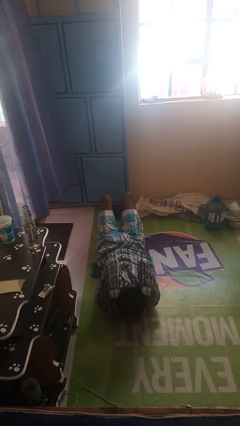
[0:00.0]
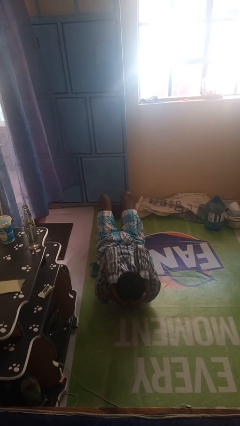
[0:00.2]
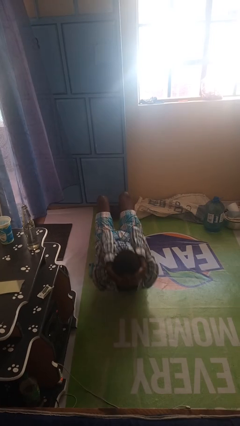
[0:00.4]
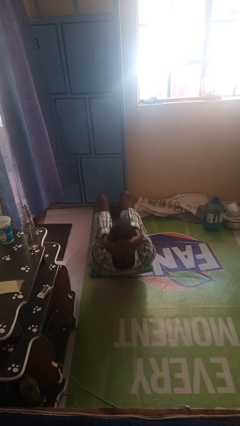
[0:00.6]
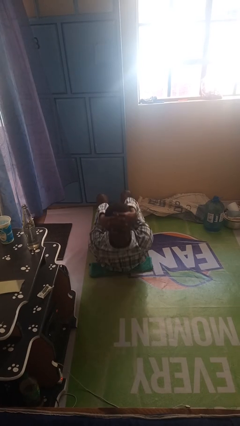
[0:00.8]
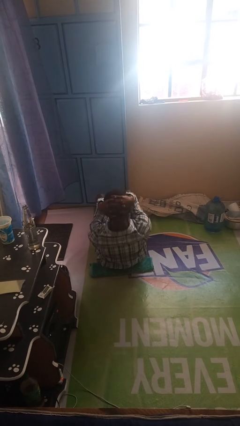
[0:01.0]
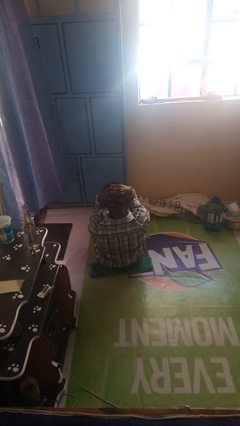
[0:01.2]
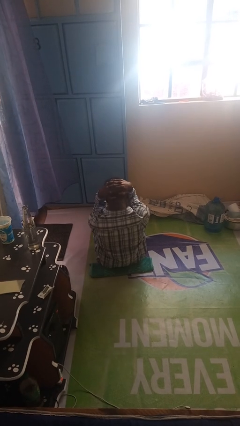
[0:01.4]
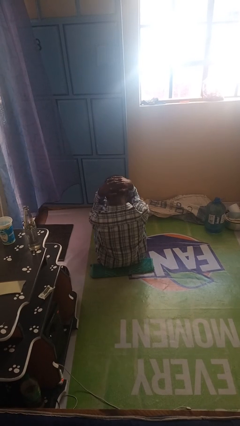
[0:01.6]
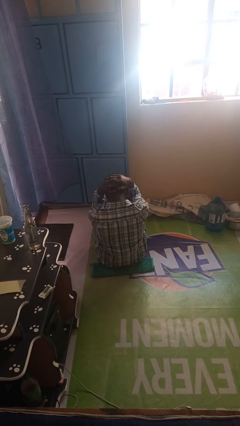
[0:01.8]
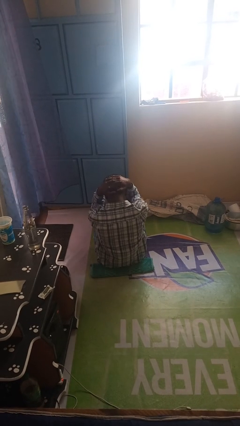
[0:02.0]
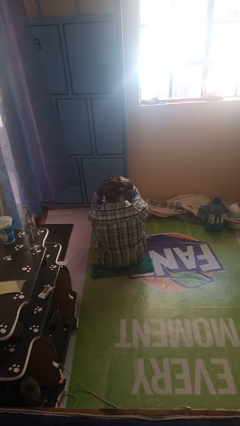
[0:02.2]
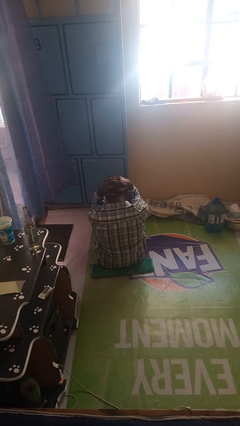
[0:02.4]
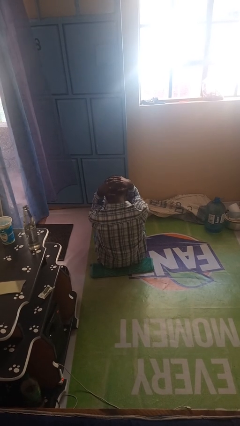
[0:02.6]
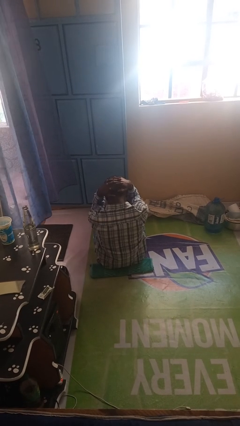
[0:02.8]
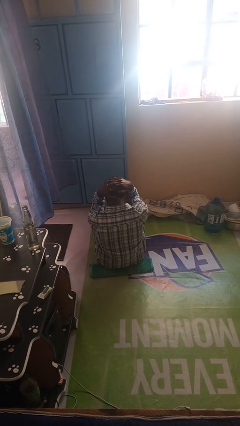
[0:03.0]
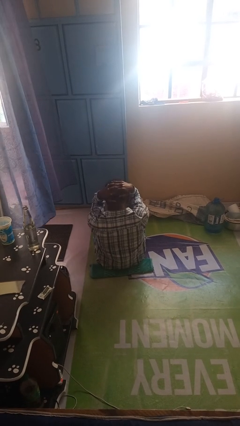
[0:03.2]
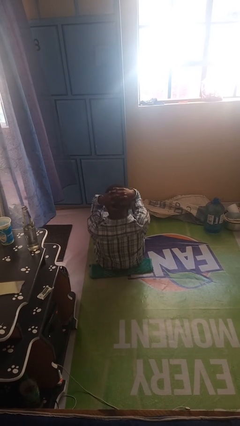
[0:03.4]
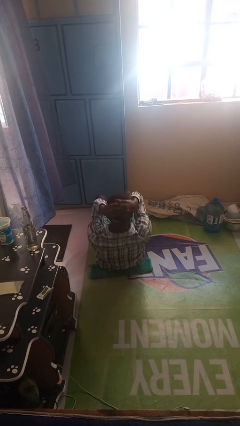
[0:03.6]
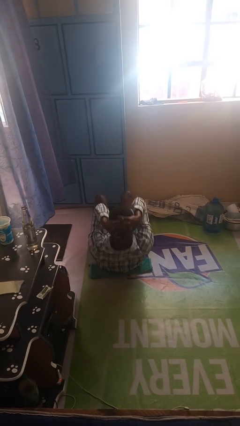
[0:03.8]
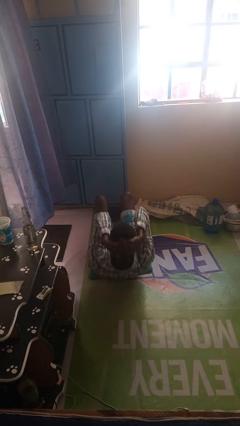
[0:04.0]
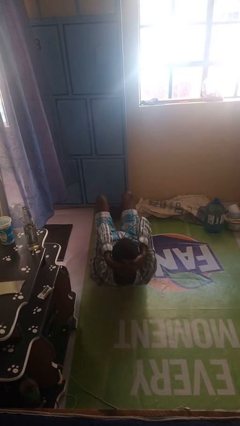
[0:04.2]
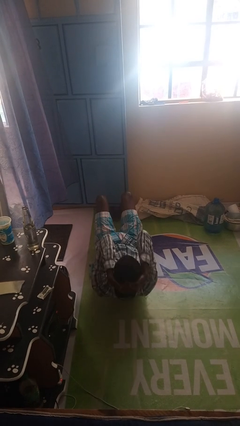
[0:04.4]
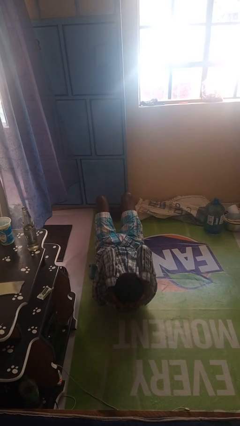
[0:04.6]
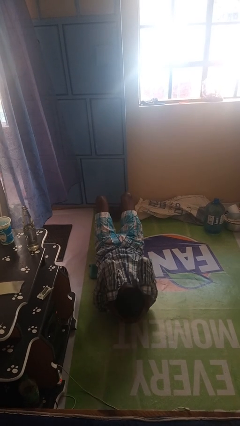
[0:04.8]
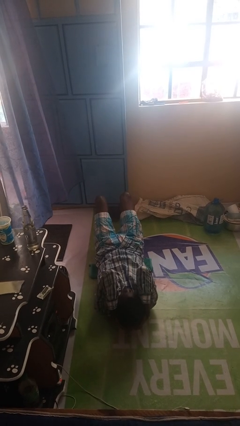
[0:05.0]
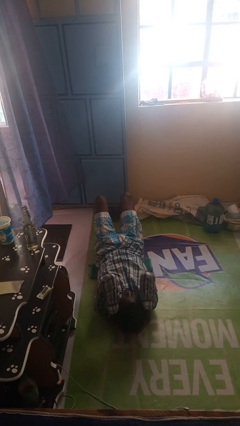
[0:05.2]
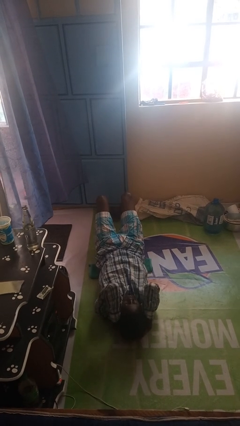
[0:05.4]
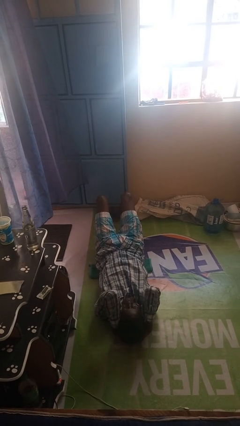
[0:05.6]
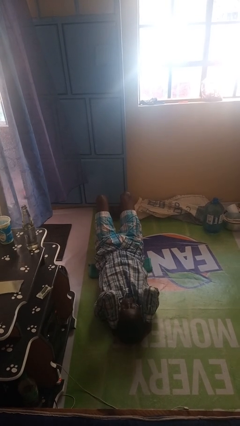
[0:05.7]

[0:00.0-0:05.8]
person exercises with situp

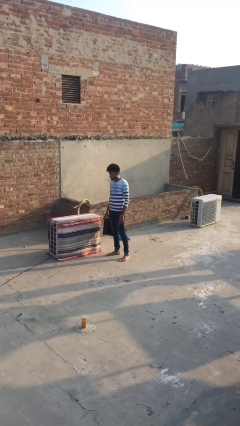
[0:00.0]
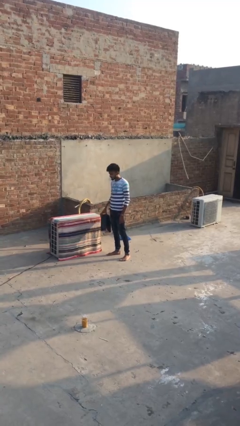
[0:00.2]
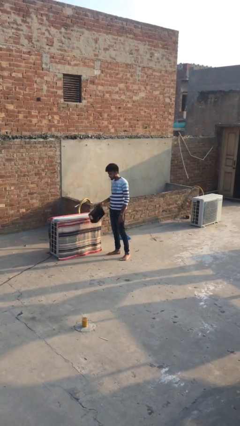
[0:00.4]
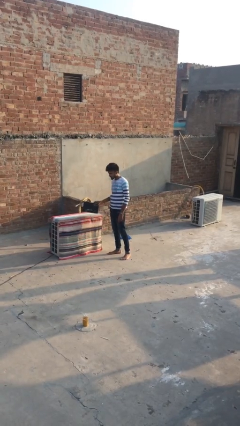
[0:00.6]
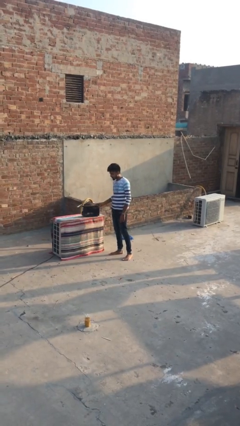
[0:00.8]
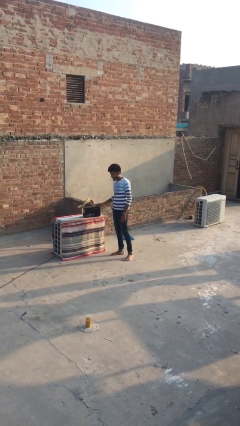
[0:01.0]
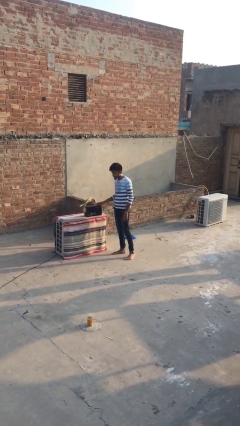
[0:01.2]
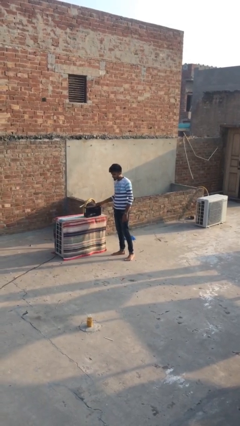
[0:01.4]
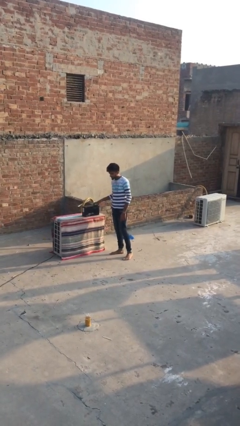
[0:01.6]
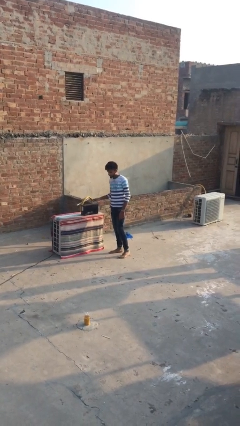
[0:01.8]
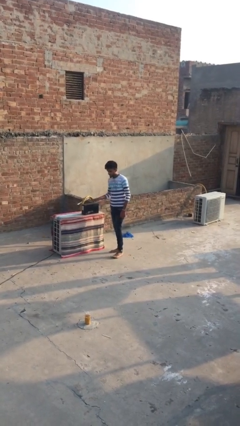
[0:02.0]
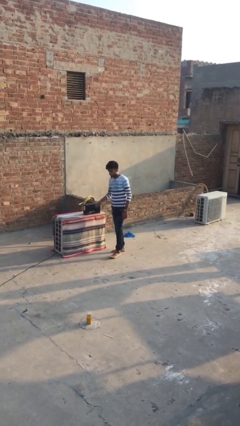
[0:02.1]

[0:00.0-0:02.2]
person puts down object on table

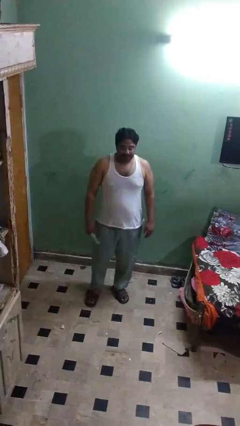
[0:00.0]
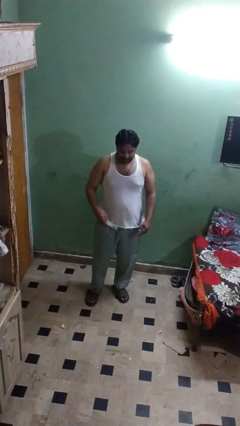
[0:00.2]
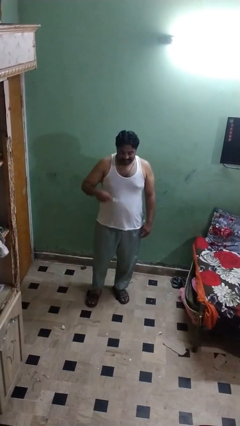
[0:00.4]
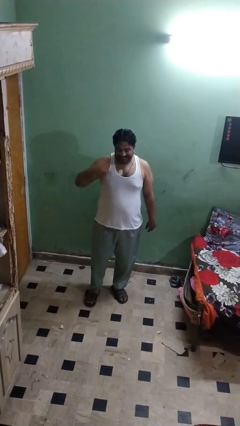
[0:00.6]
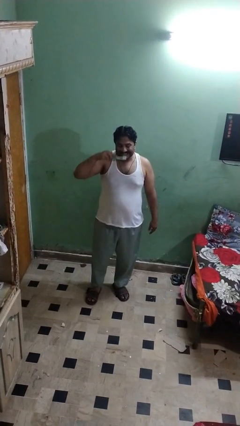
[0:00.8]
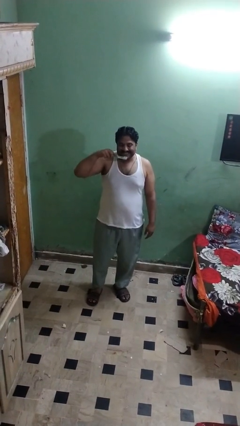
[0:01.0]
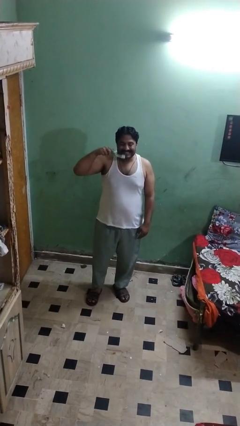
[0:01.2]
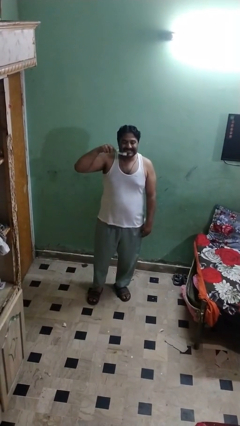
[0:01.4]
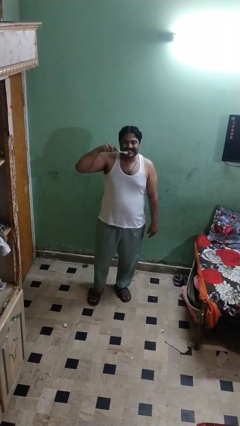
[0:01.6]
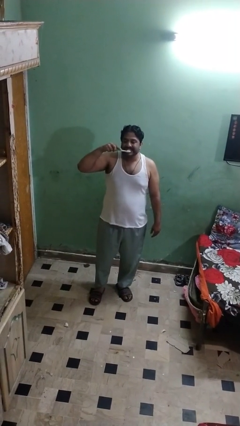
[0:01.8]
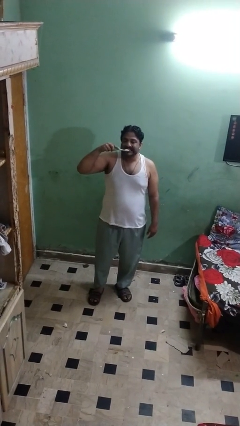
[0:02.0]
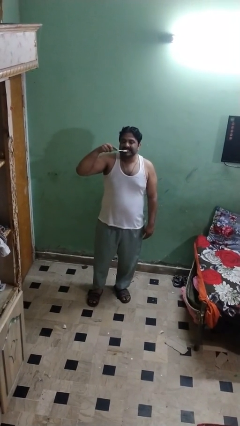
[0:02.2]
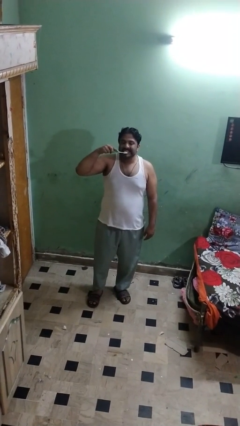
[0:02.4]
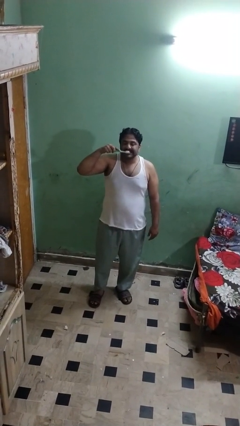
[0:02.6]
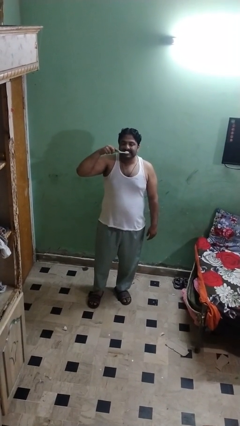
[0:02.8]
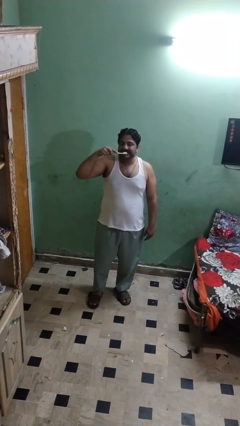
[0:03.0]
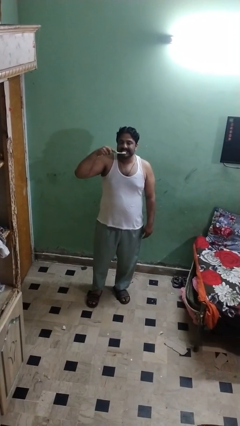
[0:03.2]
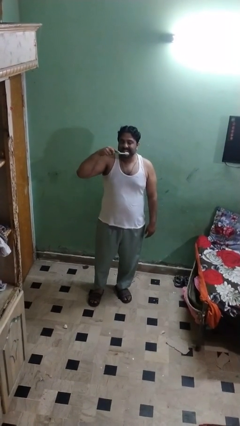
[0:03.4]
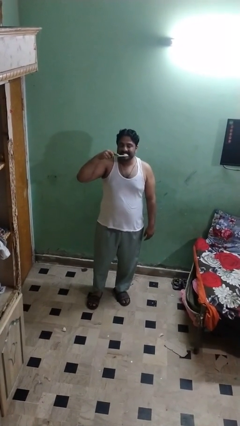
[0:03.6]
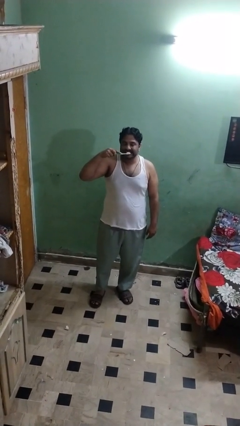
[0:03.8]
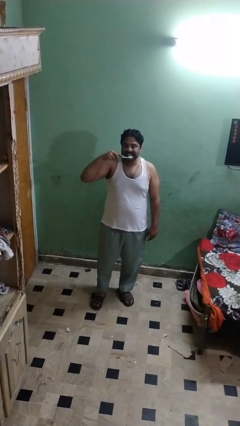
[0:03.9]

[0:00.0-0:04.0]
person brushes teeth

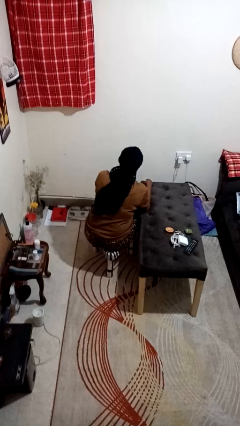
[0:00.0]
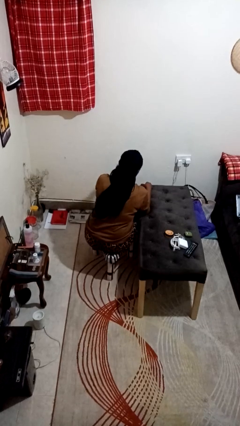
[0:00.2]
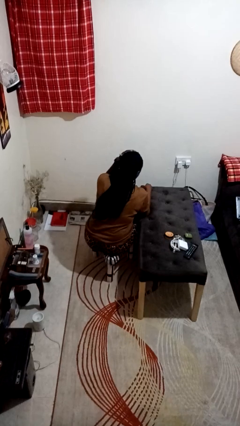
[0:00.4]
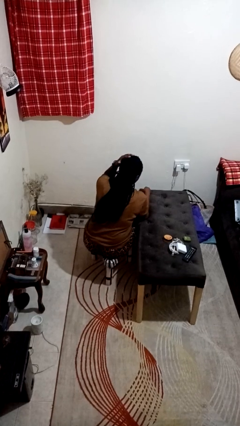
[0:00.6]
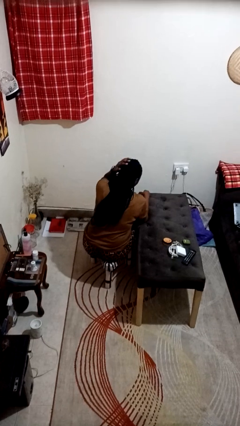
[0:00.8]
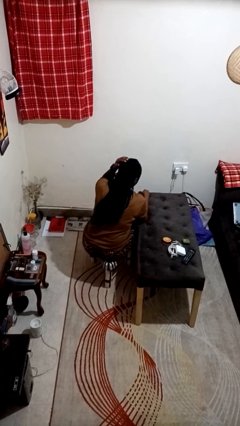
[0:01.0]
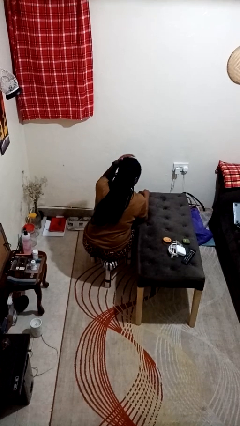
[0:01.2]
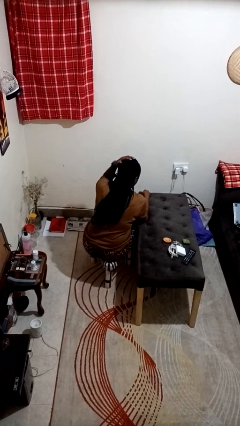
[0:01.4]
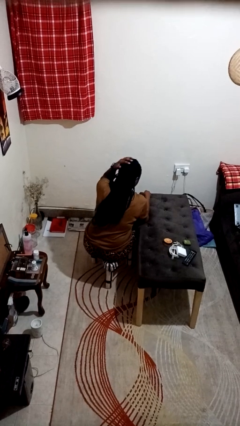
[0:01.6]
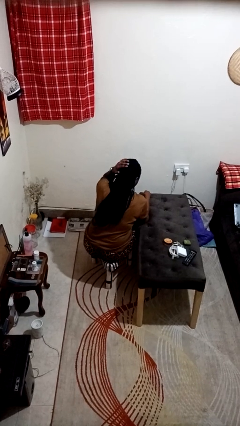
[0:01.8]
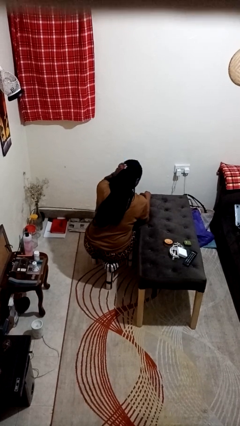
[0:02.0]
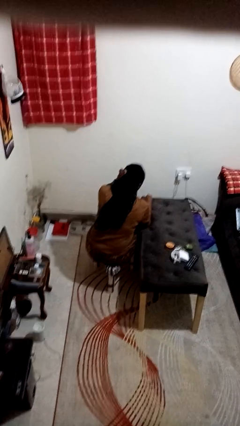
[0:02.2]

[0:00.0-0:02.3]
person strokes hair

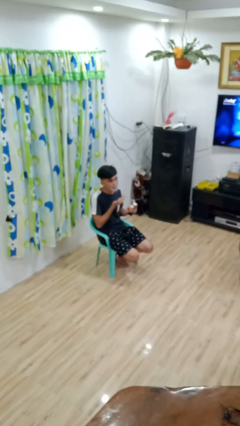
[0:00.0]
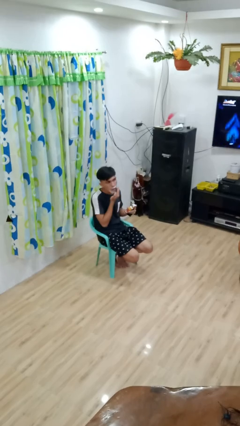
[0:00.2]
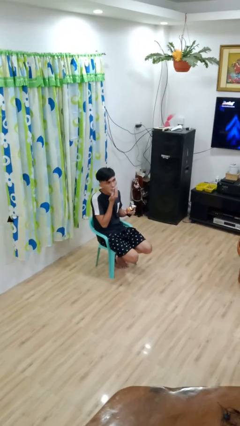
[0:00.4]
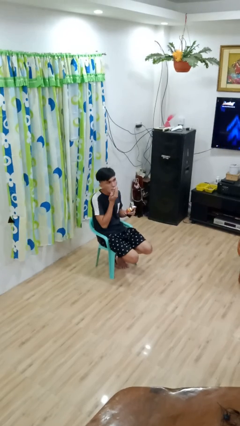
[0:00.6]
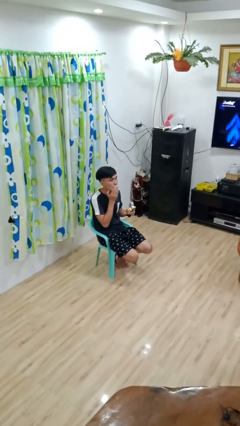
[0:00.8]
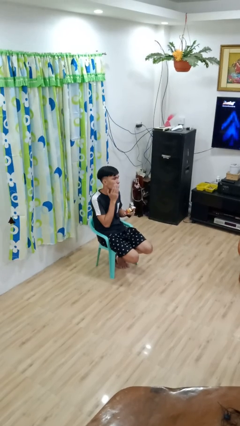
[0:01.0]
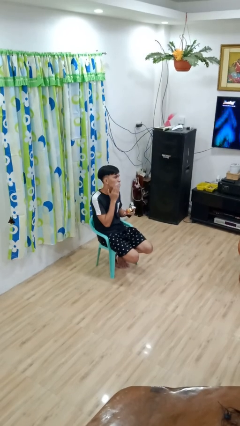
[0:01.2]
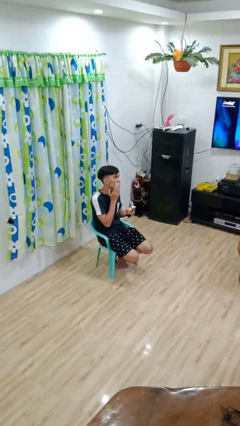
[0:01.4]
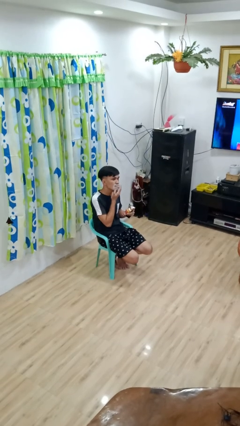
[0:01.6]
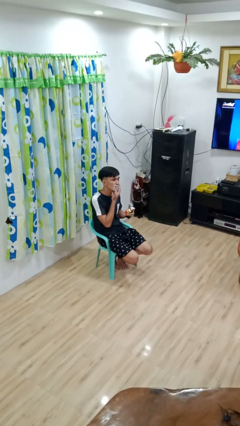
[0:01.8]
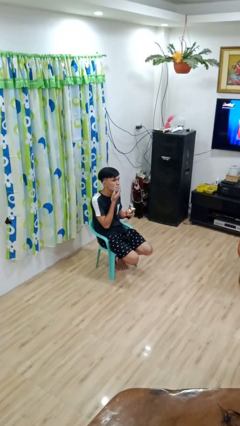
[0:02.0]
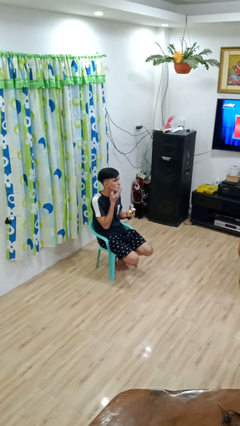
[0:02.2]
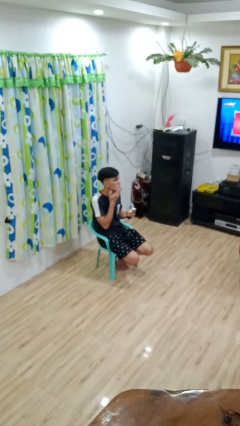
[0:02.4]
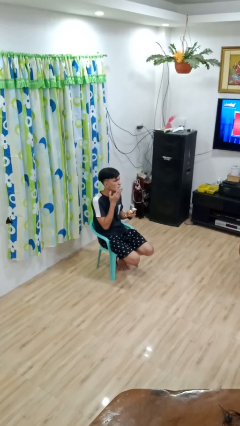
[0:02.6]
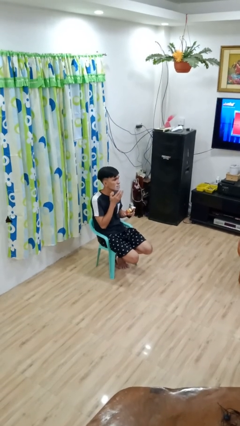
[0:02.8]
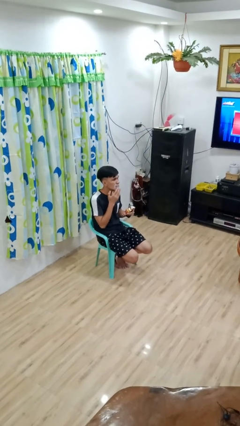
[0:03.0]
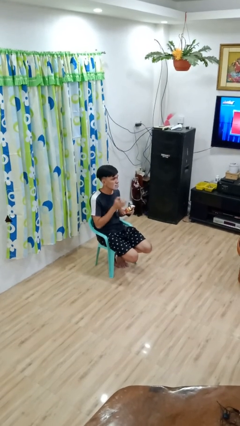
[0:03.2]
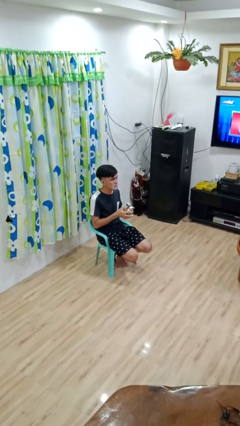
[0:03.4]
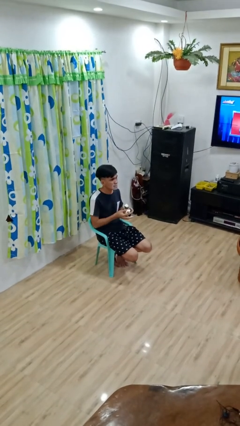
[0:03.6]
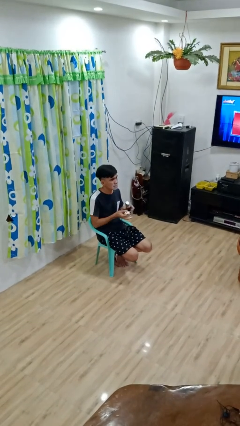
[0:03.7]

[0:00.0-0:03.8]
person applies shaving cream
